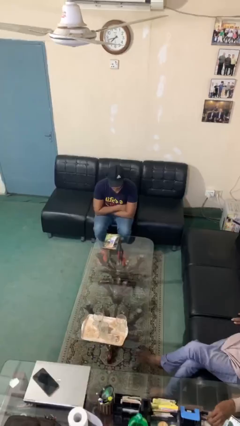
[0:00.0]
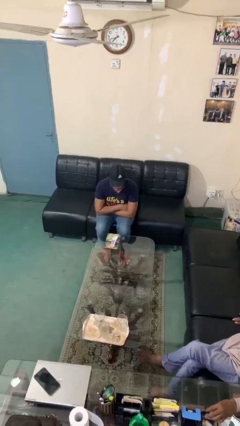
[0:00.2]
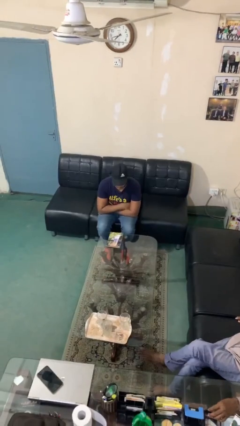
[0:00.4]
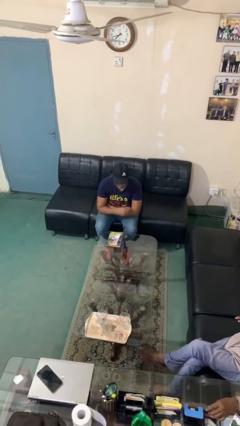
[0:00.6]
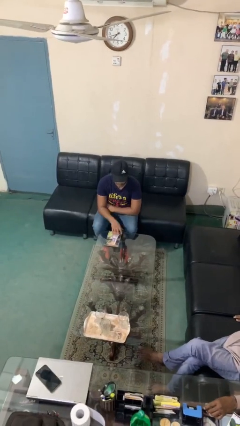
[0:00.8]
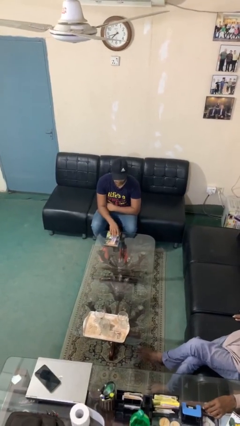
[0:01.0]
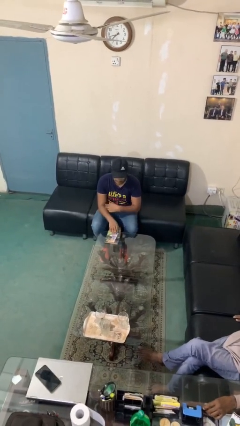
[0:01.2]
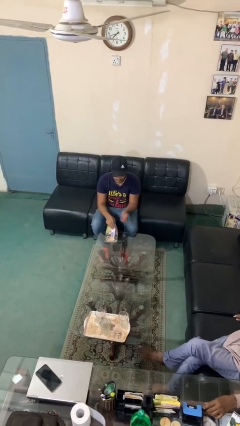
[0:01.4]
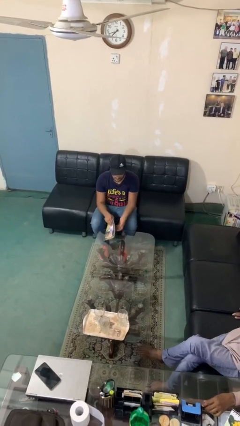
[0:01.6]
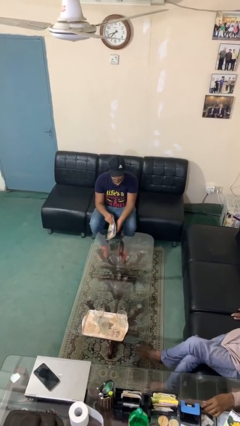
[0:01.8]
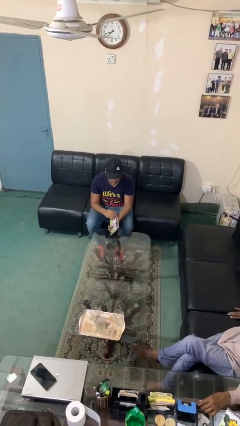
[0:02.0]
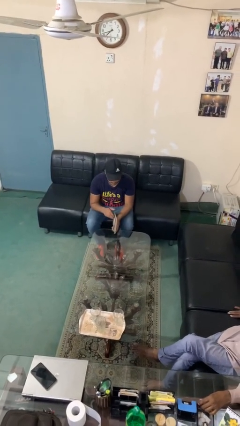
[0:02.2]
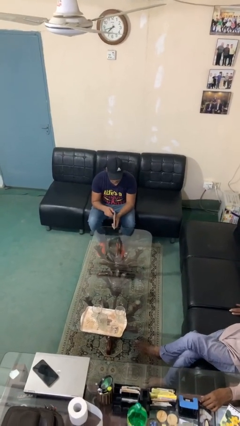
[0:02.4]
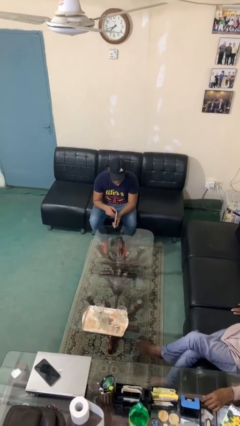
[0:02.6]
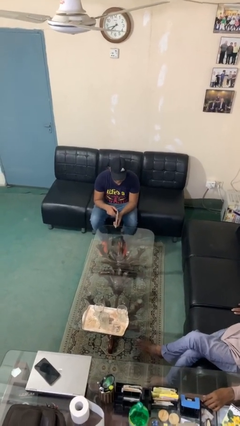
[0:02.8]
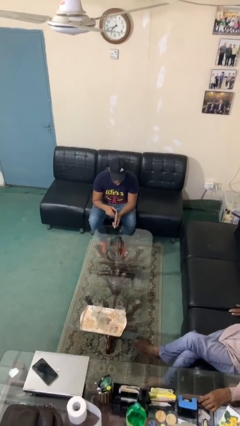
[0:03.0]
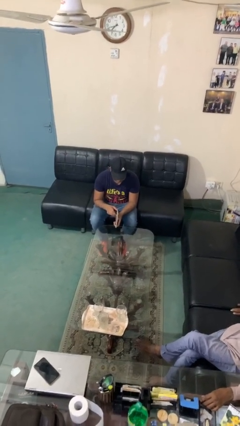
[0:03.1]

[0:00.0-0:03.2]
person picks up object from table

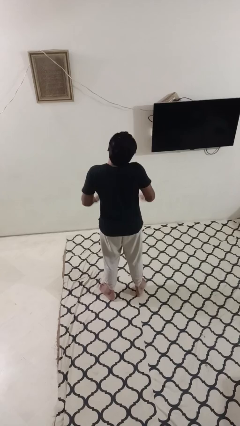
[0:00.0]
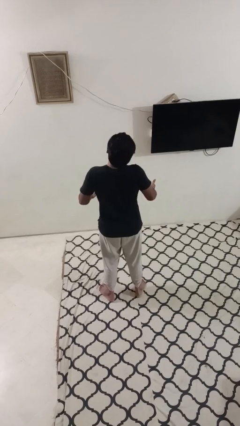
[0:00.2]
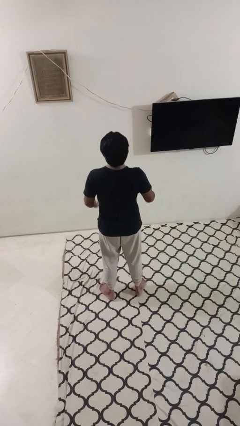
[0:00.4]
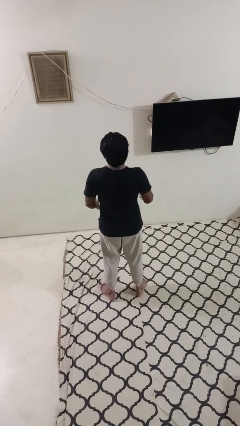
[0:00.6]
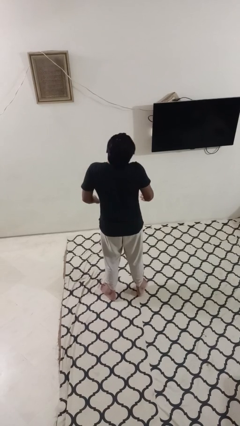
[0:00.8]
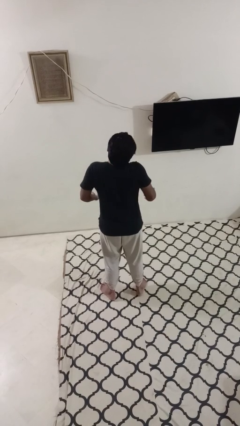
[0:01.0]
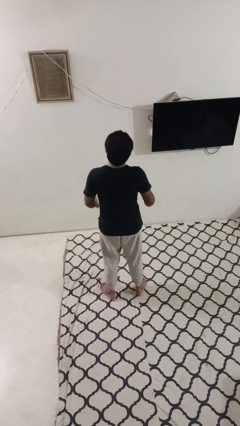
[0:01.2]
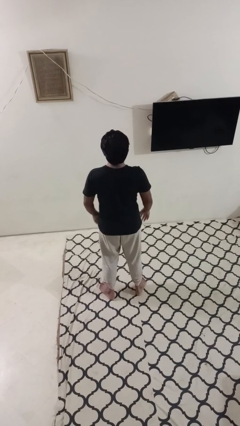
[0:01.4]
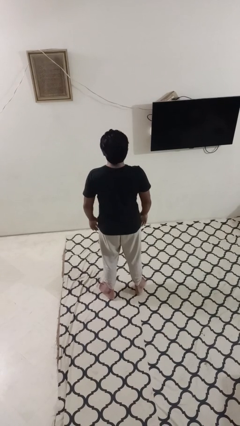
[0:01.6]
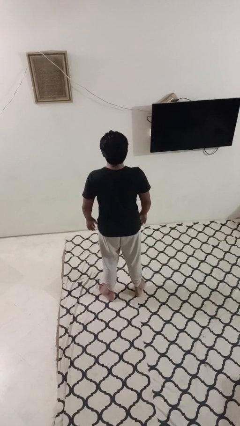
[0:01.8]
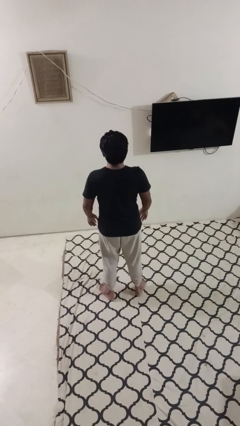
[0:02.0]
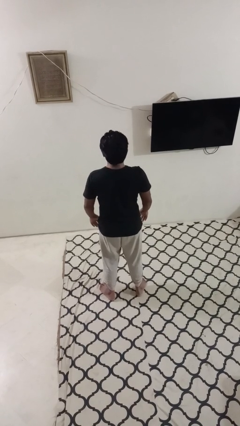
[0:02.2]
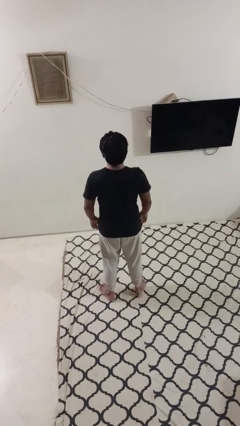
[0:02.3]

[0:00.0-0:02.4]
person shrugs

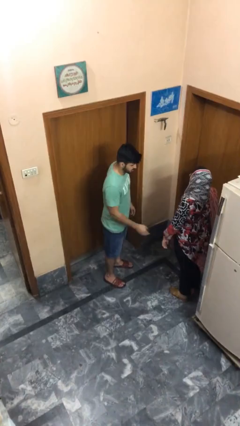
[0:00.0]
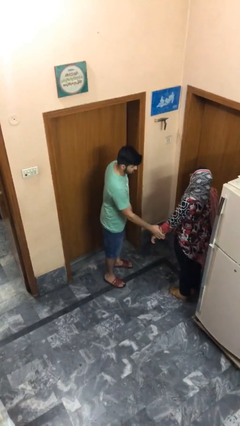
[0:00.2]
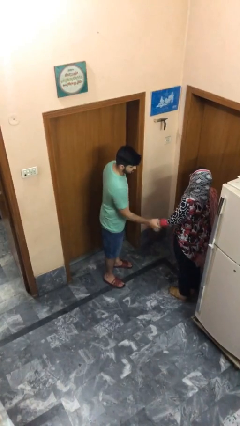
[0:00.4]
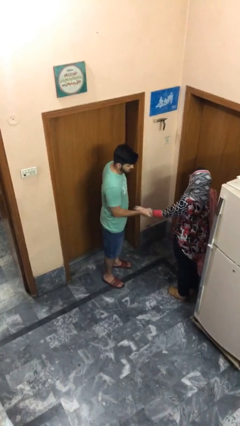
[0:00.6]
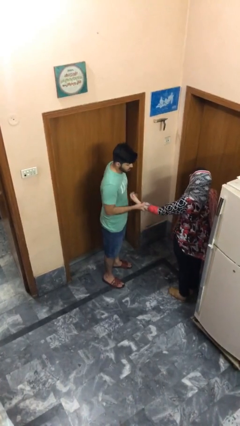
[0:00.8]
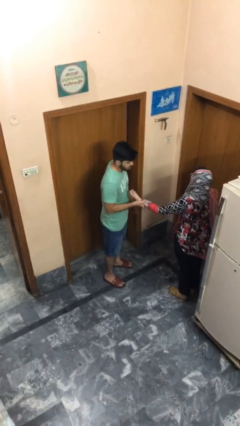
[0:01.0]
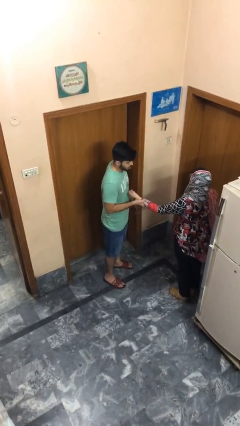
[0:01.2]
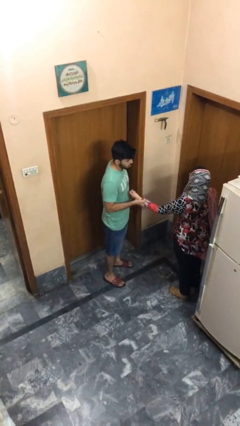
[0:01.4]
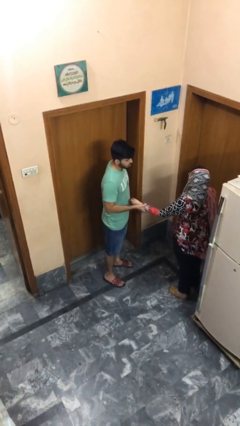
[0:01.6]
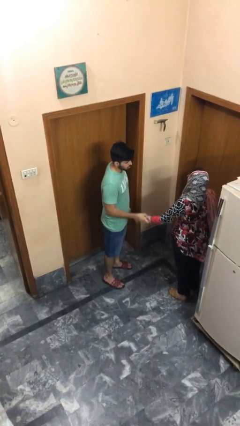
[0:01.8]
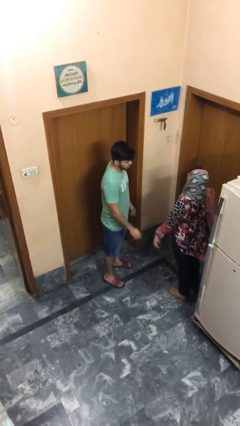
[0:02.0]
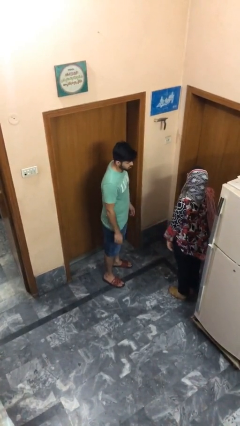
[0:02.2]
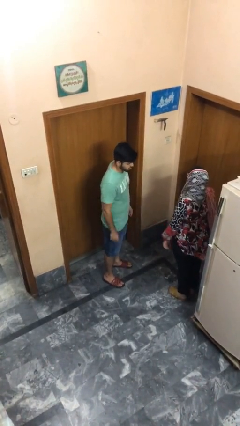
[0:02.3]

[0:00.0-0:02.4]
person grabs person by forearm

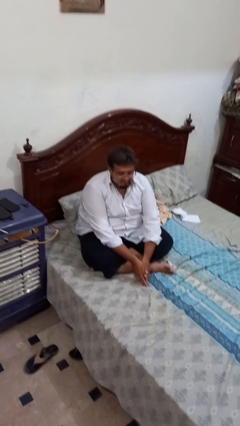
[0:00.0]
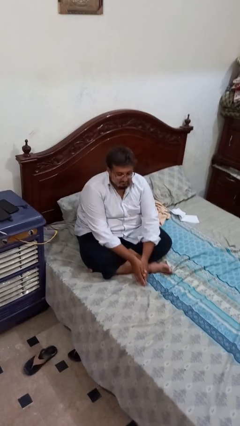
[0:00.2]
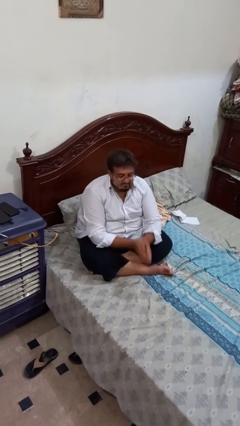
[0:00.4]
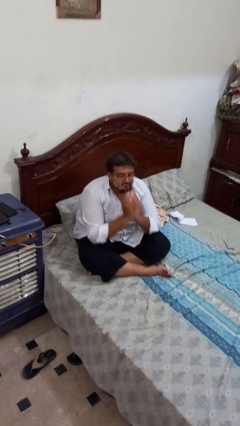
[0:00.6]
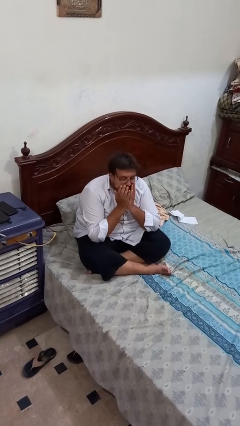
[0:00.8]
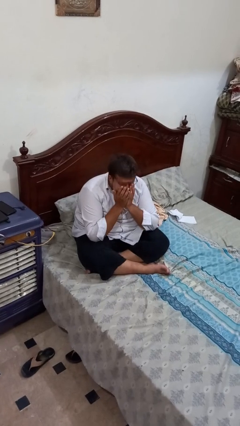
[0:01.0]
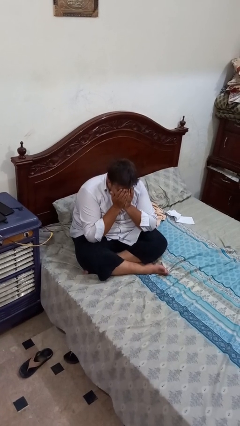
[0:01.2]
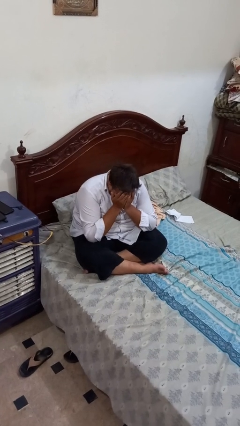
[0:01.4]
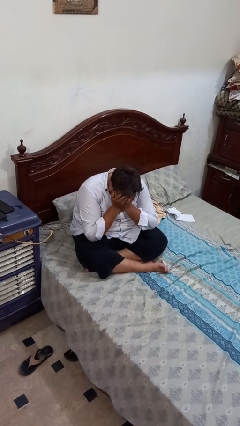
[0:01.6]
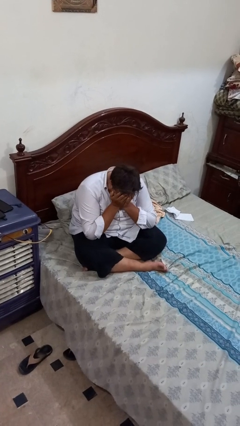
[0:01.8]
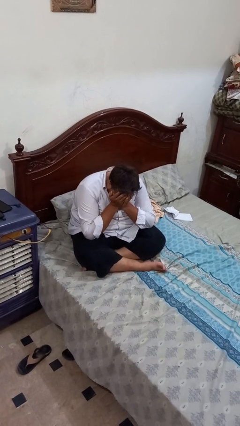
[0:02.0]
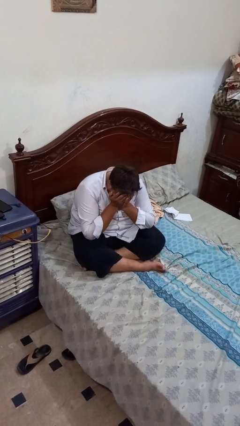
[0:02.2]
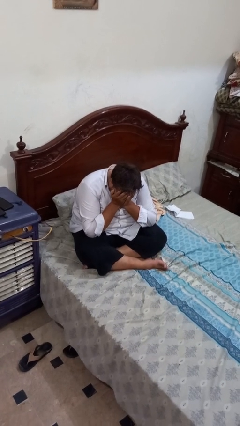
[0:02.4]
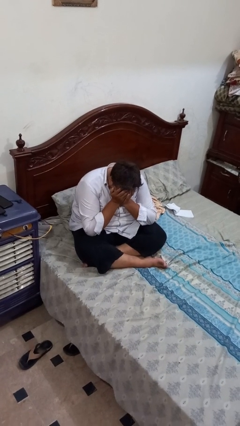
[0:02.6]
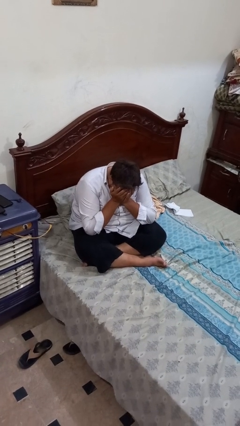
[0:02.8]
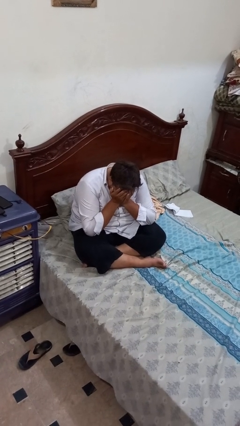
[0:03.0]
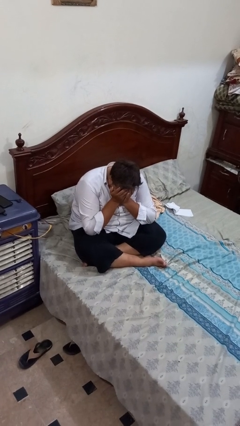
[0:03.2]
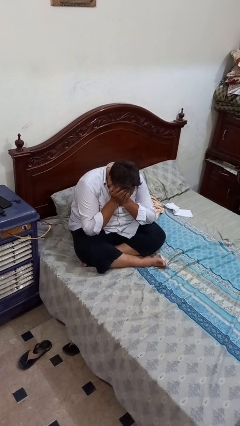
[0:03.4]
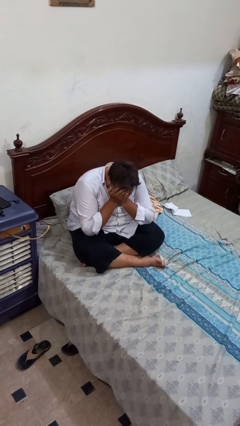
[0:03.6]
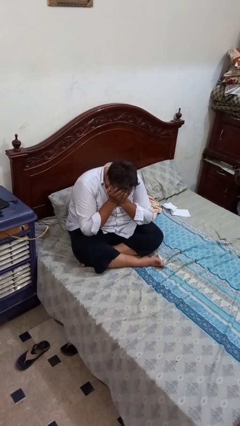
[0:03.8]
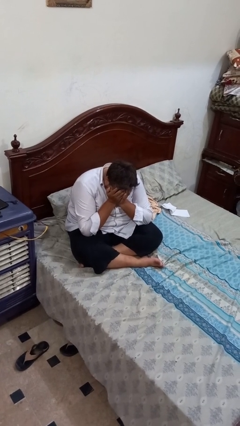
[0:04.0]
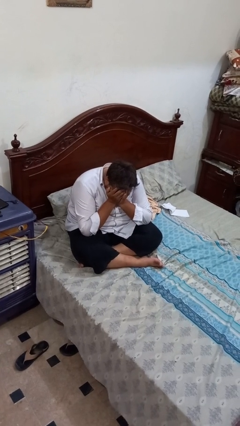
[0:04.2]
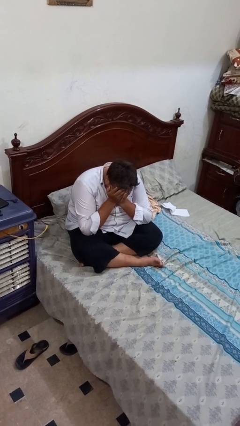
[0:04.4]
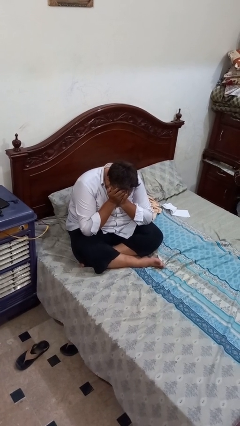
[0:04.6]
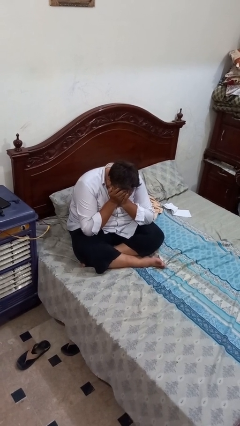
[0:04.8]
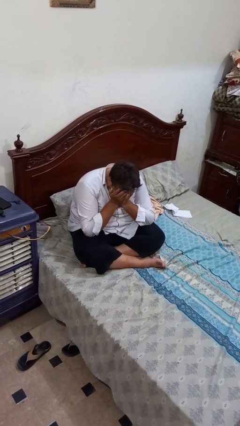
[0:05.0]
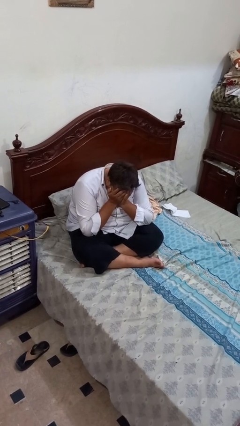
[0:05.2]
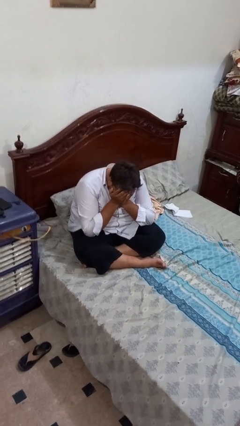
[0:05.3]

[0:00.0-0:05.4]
person covers face with hands

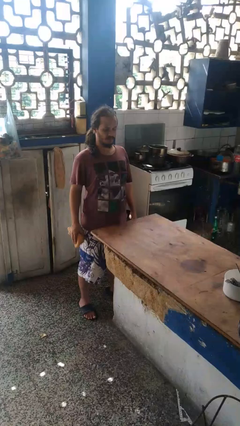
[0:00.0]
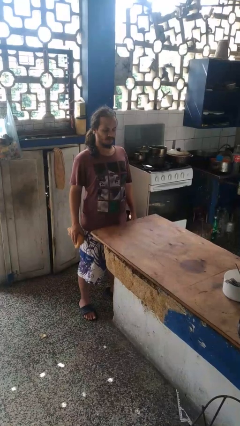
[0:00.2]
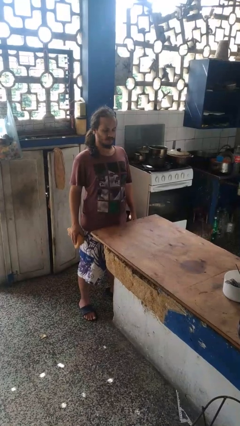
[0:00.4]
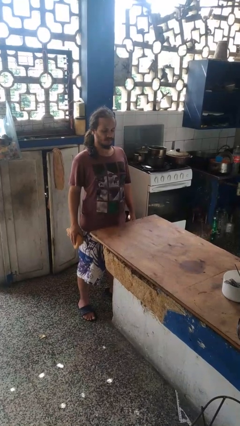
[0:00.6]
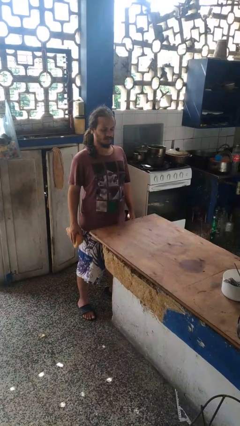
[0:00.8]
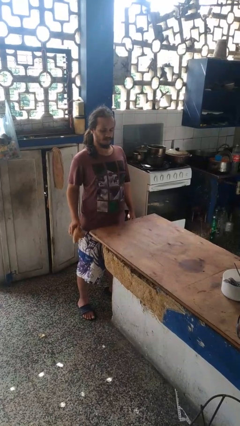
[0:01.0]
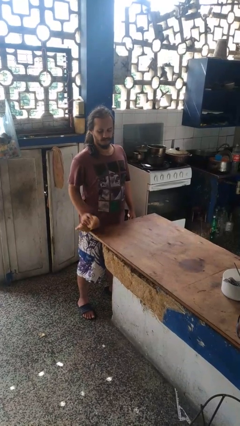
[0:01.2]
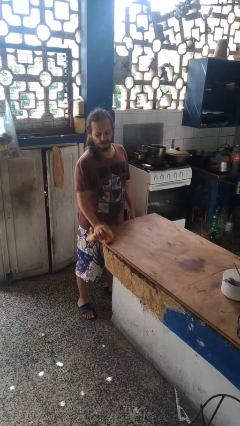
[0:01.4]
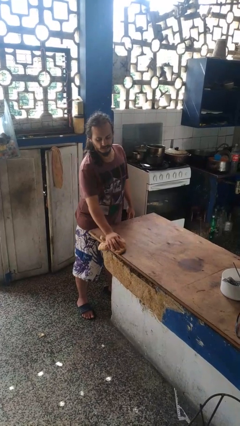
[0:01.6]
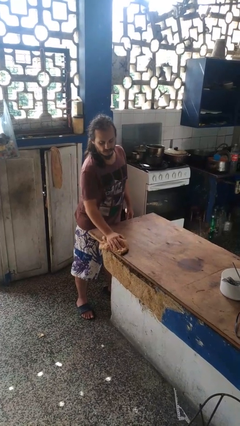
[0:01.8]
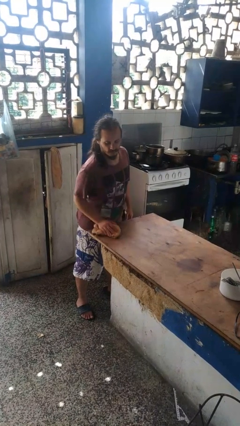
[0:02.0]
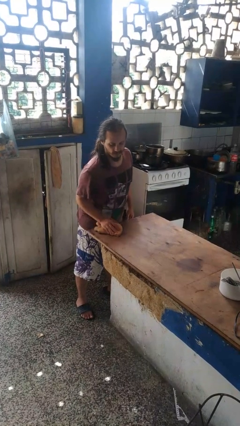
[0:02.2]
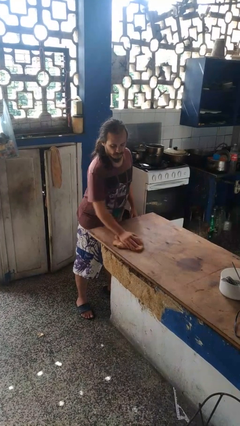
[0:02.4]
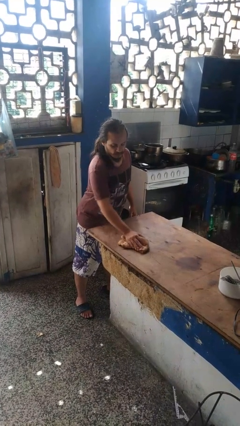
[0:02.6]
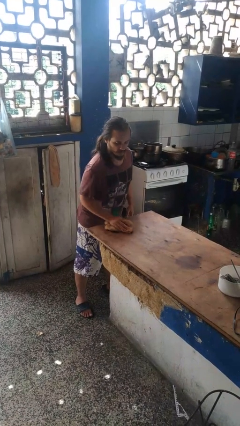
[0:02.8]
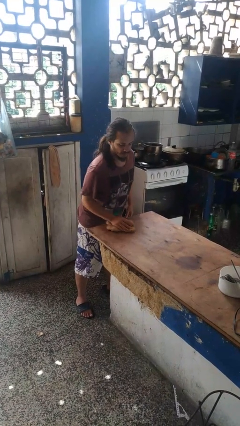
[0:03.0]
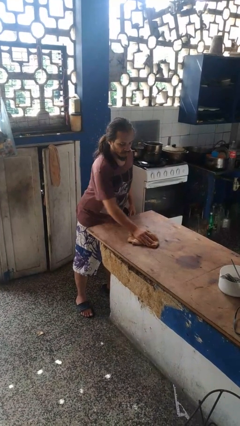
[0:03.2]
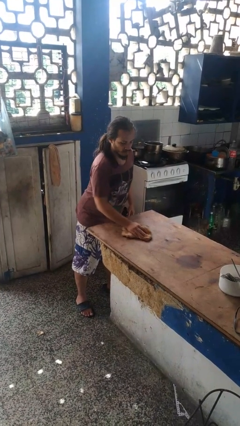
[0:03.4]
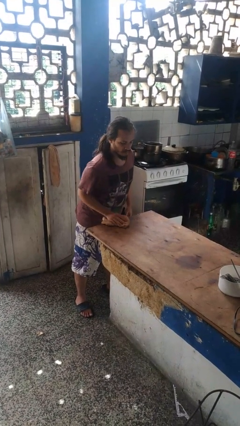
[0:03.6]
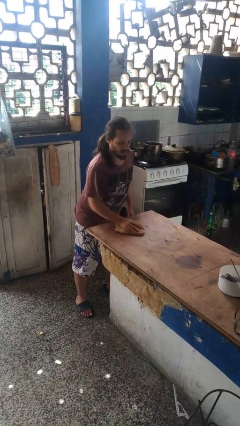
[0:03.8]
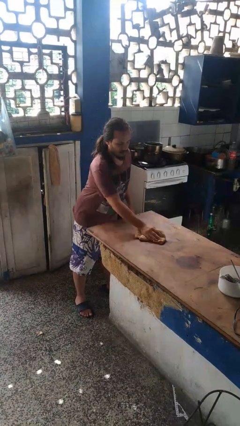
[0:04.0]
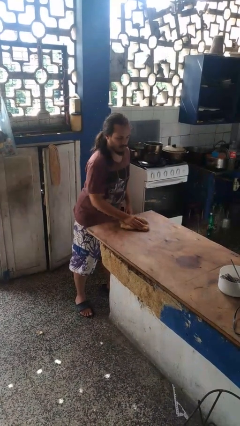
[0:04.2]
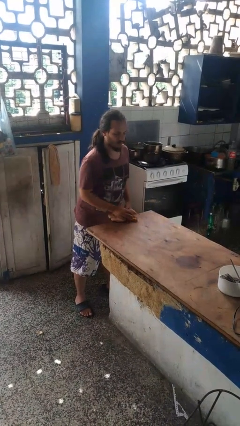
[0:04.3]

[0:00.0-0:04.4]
person cleans table with rag

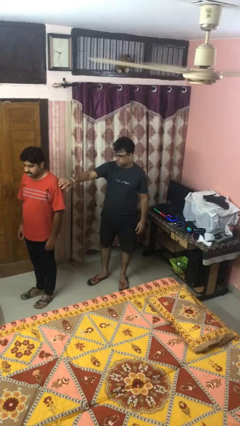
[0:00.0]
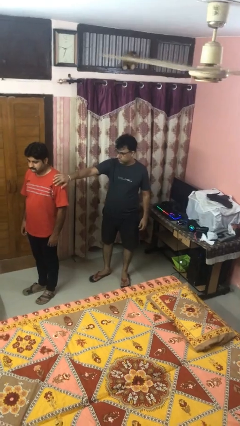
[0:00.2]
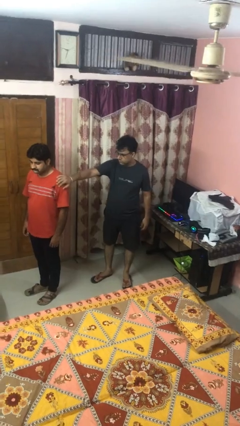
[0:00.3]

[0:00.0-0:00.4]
person grabs person by shoulder
